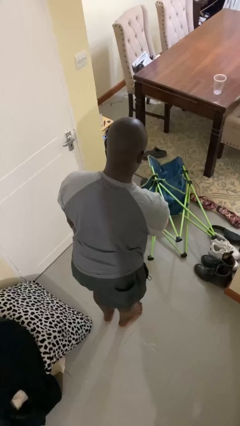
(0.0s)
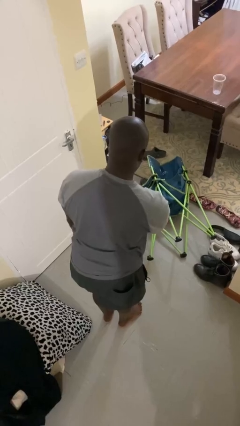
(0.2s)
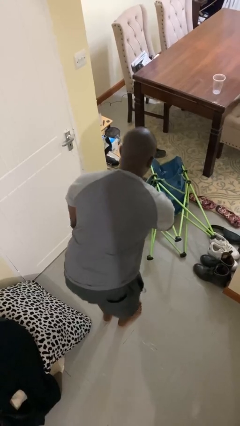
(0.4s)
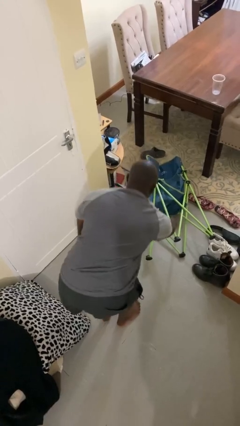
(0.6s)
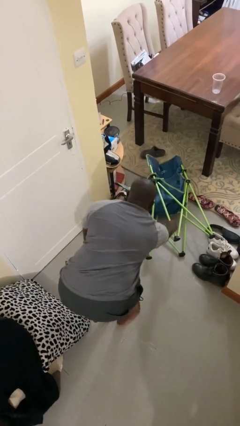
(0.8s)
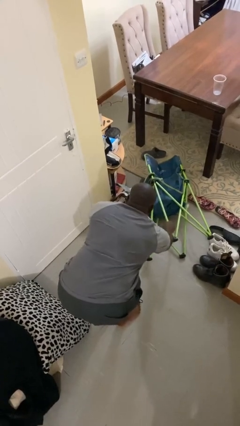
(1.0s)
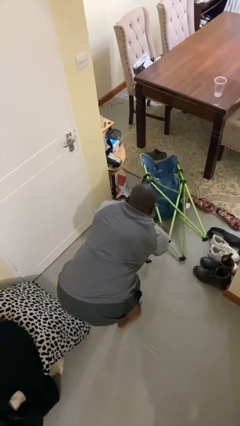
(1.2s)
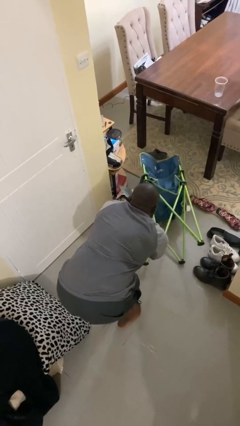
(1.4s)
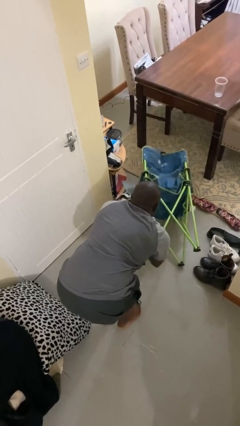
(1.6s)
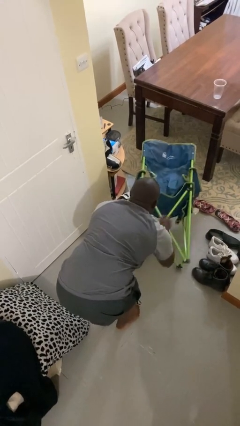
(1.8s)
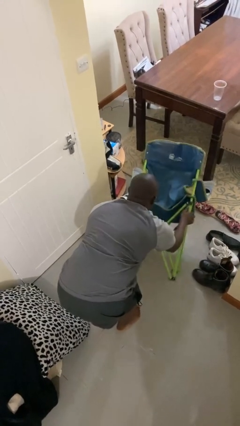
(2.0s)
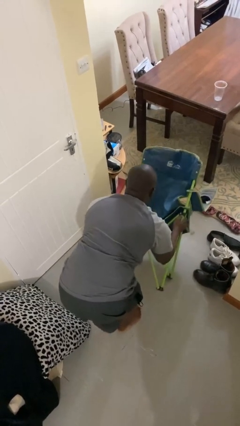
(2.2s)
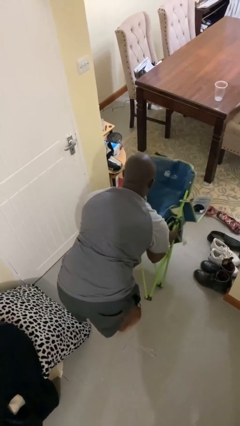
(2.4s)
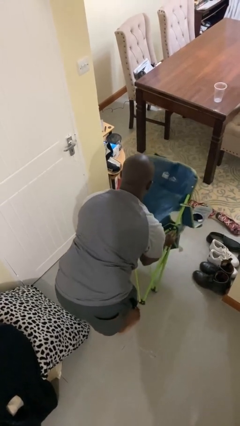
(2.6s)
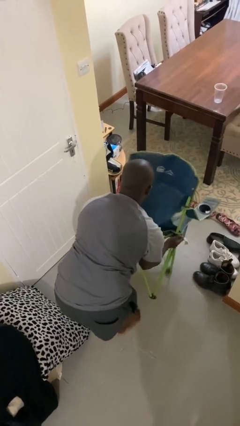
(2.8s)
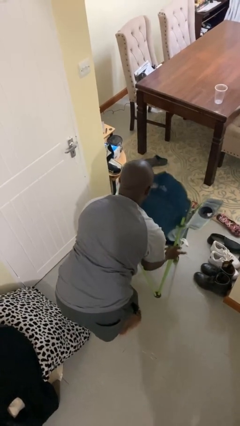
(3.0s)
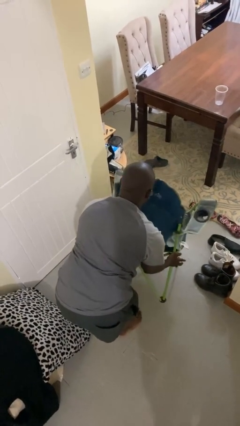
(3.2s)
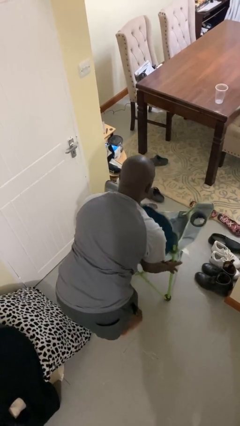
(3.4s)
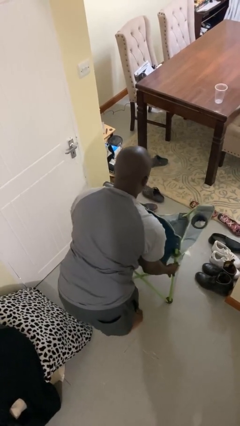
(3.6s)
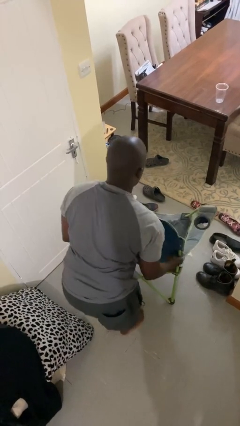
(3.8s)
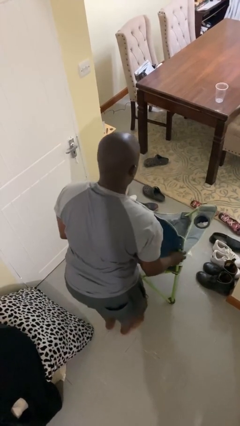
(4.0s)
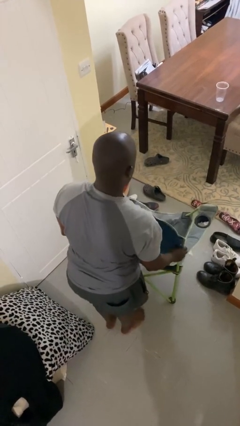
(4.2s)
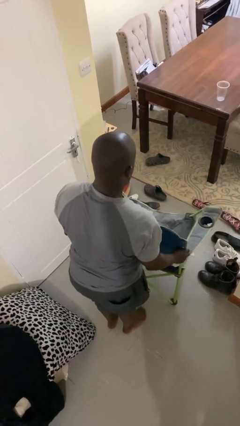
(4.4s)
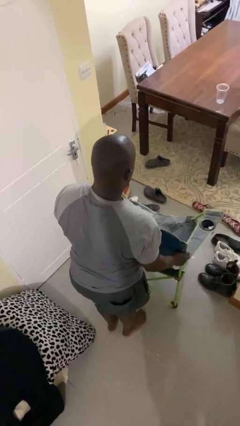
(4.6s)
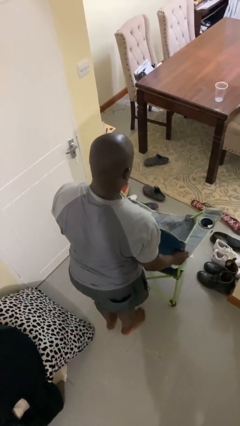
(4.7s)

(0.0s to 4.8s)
person sets upright furniture

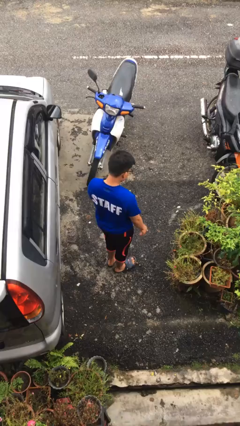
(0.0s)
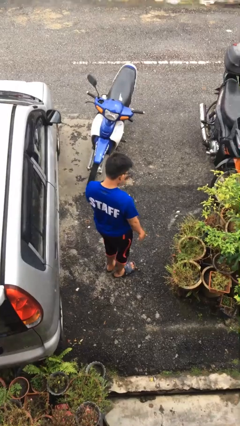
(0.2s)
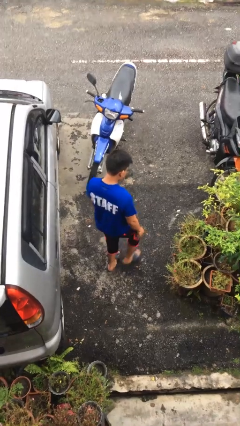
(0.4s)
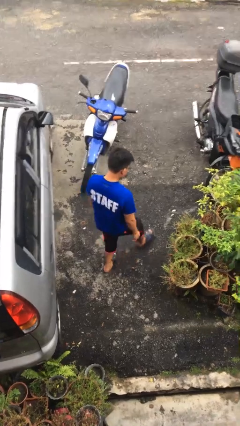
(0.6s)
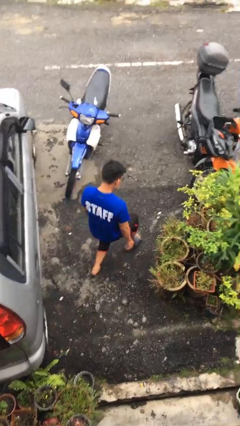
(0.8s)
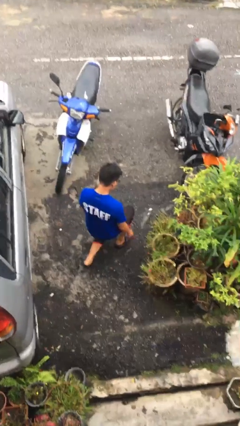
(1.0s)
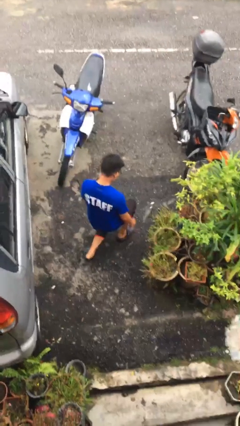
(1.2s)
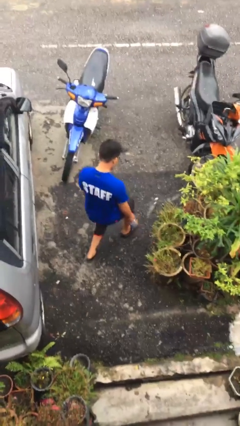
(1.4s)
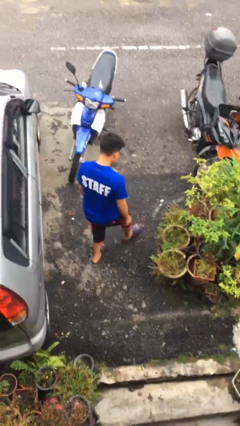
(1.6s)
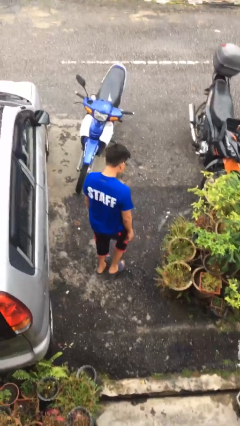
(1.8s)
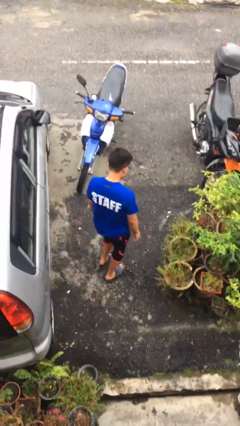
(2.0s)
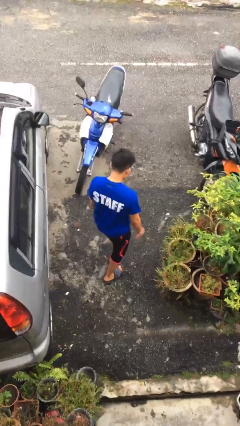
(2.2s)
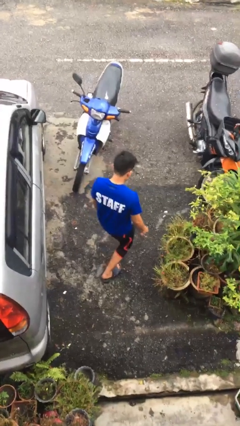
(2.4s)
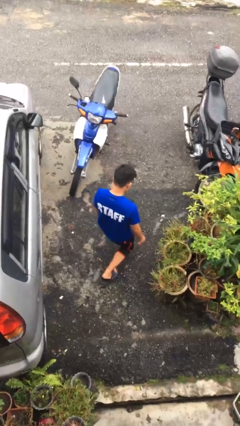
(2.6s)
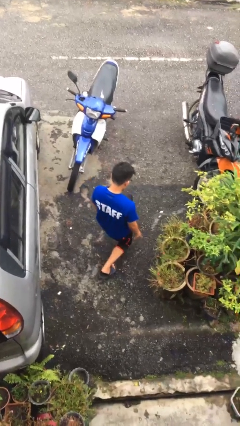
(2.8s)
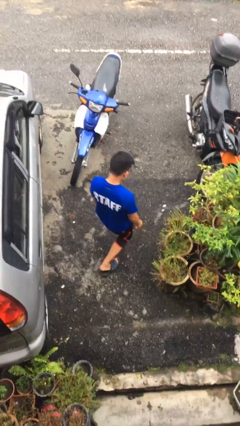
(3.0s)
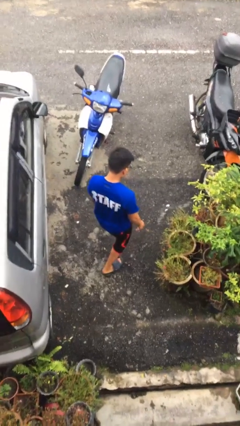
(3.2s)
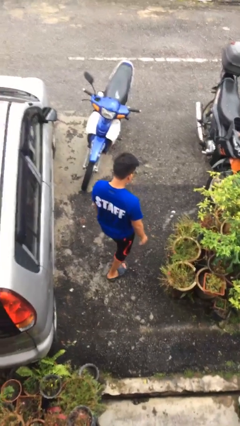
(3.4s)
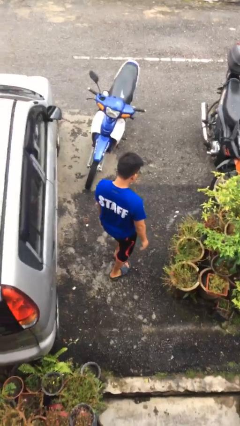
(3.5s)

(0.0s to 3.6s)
person exercises with lunges

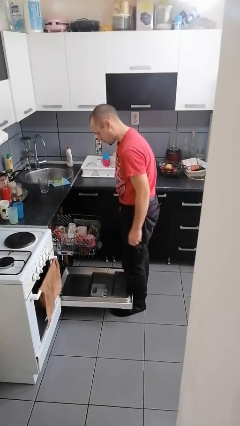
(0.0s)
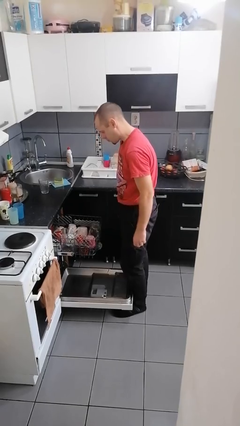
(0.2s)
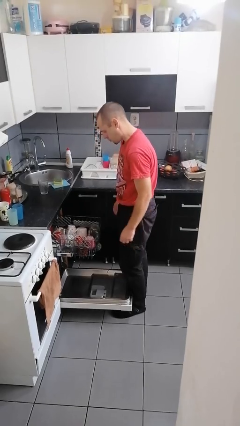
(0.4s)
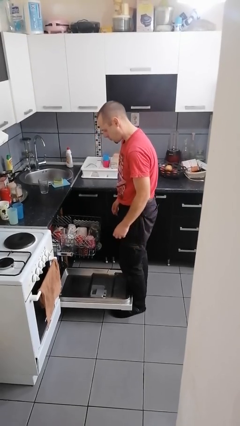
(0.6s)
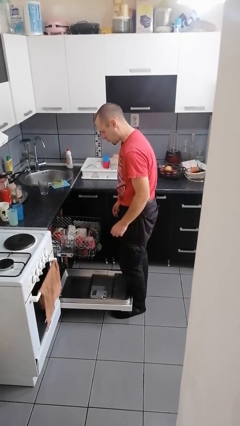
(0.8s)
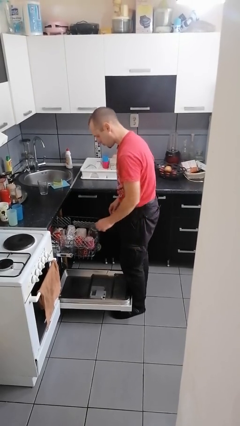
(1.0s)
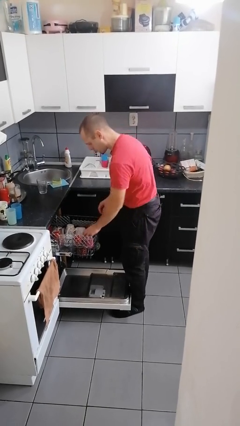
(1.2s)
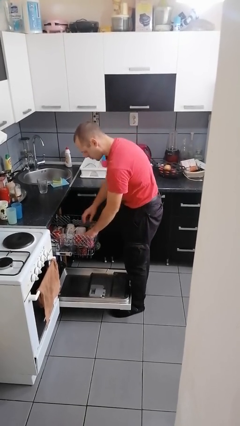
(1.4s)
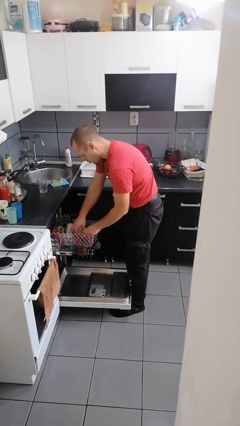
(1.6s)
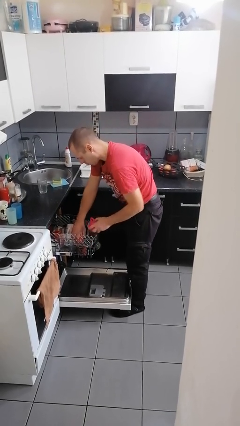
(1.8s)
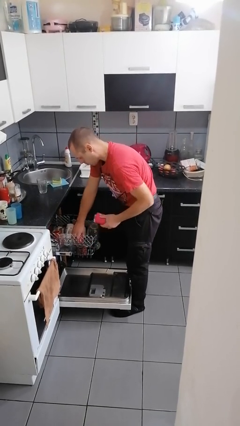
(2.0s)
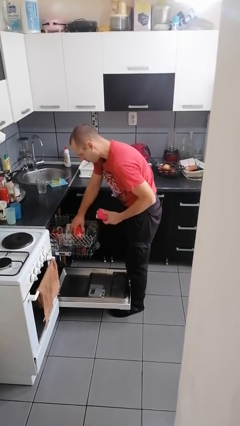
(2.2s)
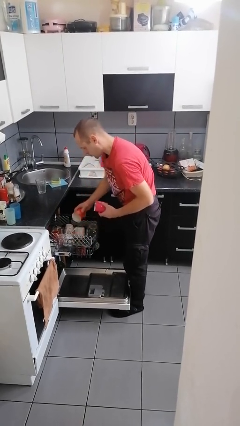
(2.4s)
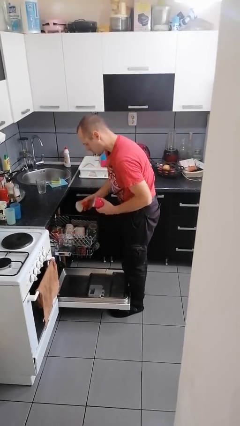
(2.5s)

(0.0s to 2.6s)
person unloads dishwasher

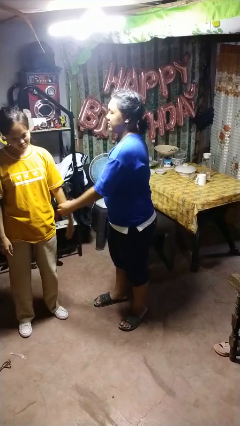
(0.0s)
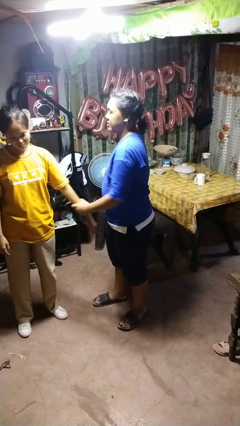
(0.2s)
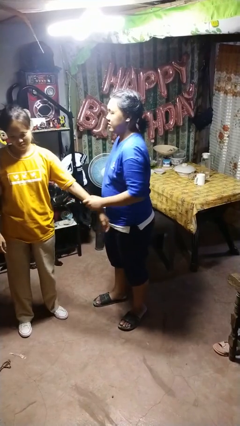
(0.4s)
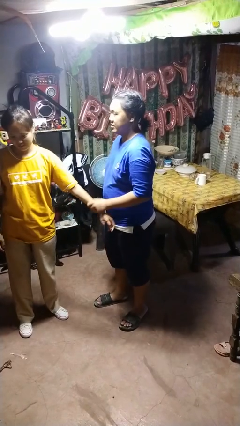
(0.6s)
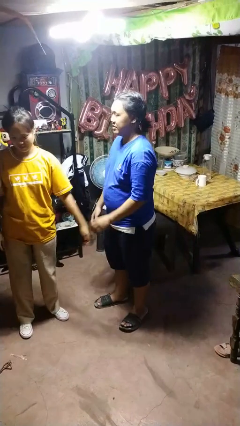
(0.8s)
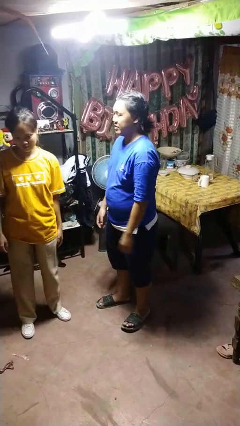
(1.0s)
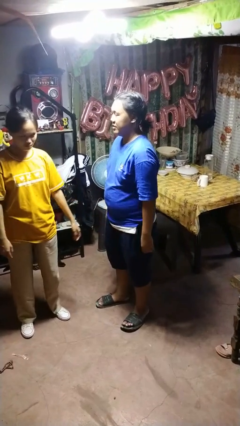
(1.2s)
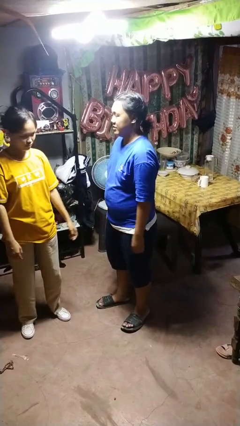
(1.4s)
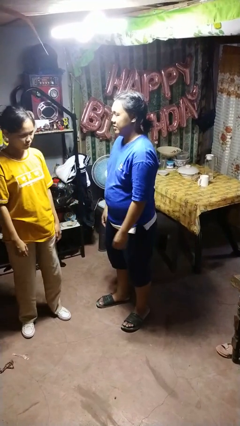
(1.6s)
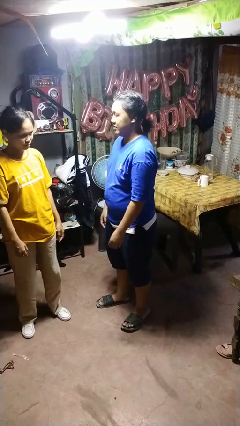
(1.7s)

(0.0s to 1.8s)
person grabs person by forearm

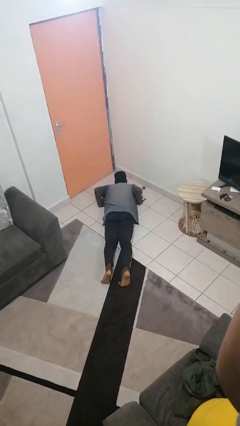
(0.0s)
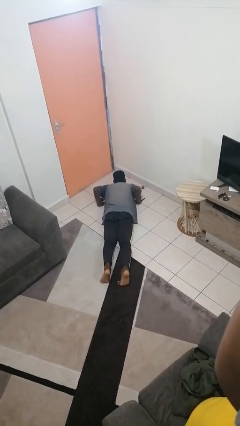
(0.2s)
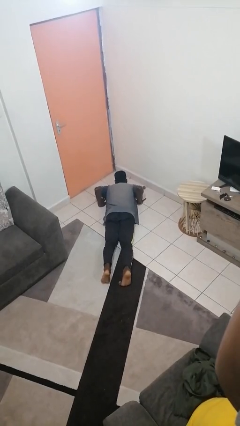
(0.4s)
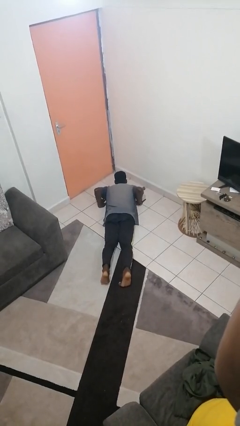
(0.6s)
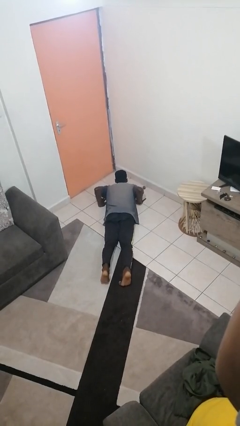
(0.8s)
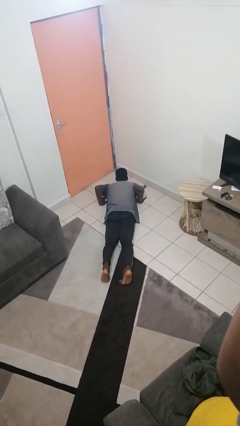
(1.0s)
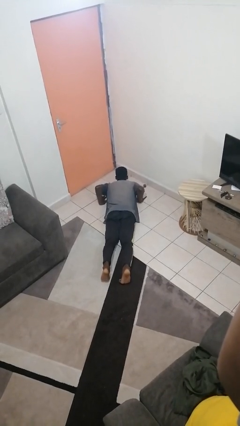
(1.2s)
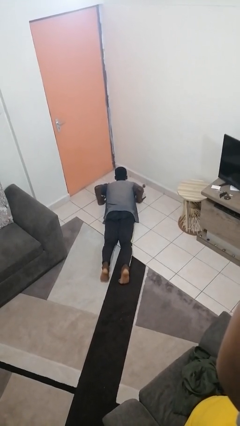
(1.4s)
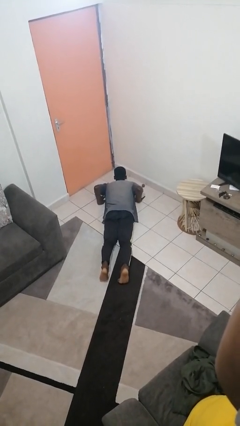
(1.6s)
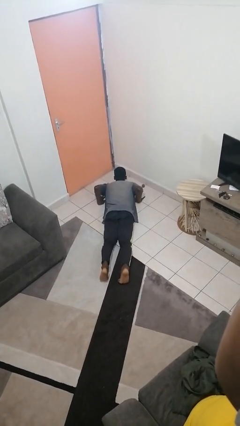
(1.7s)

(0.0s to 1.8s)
person exercises with pushup

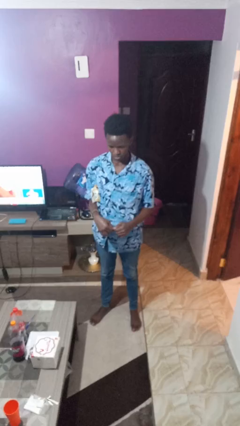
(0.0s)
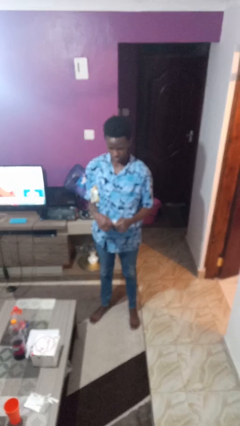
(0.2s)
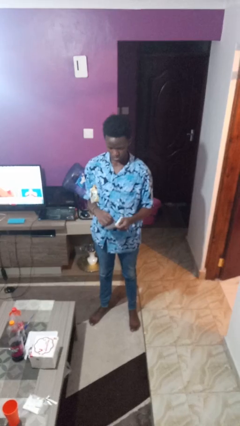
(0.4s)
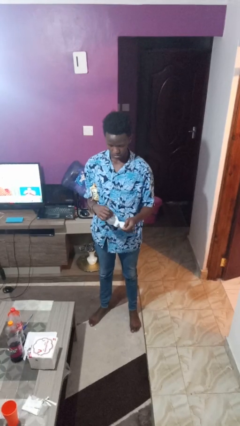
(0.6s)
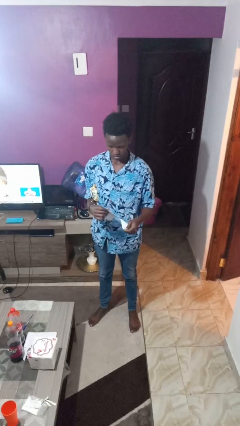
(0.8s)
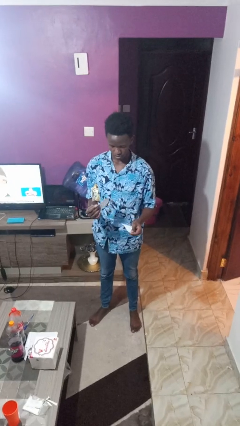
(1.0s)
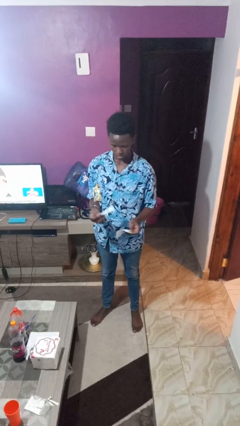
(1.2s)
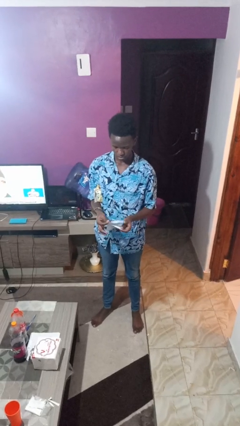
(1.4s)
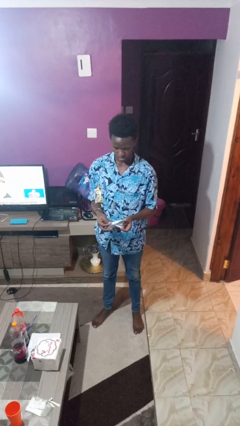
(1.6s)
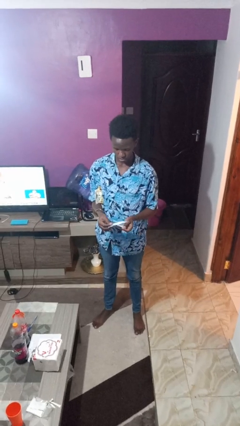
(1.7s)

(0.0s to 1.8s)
person tears paper

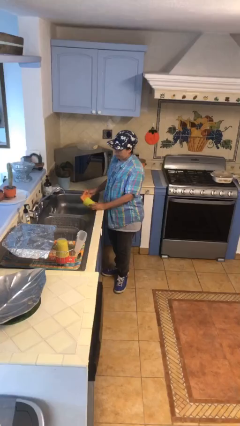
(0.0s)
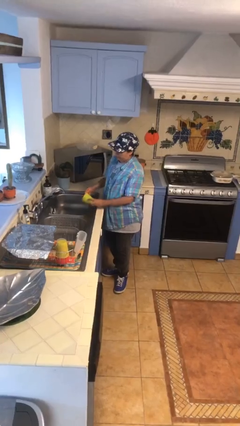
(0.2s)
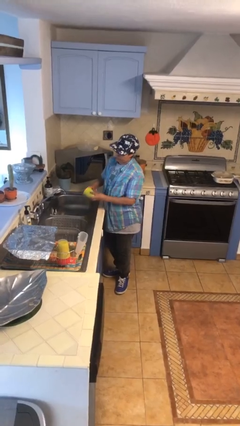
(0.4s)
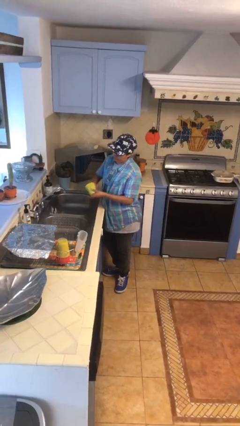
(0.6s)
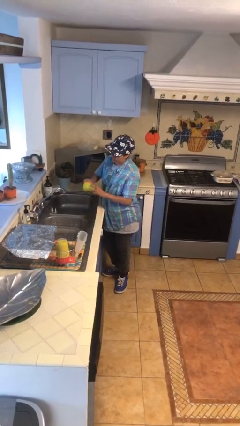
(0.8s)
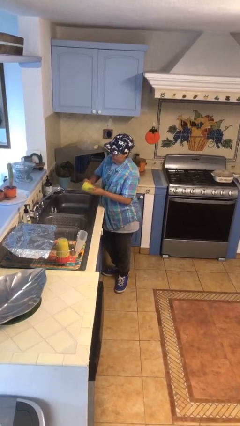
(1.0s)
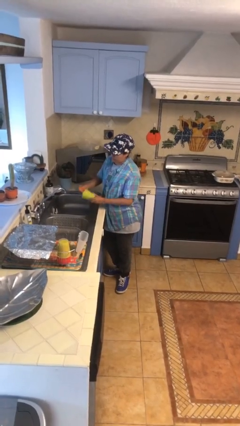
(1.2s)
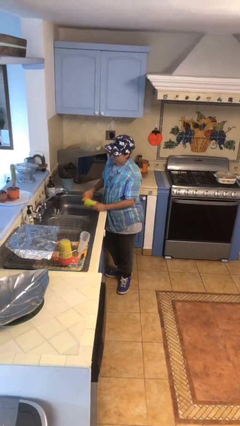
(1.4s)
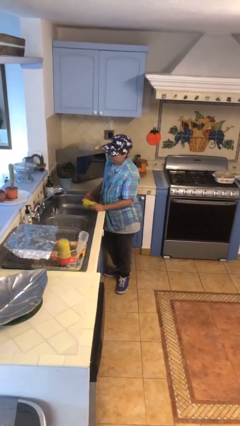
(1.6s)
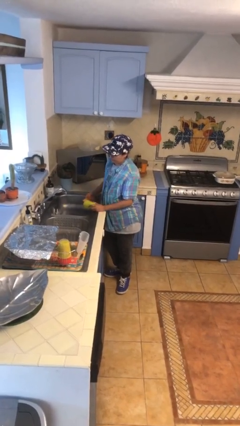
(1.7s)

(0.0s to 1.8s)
person washes dish
